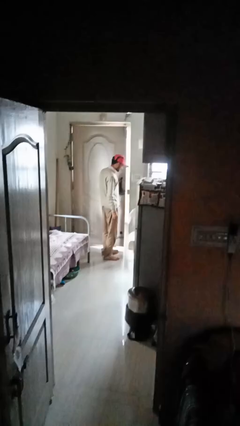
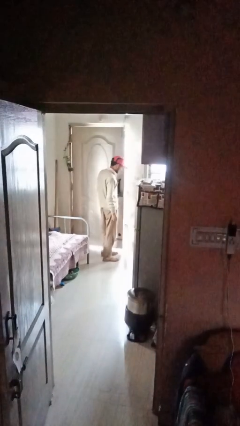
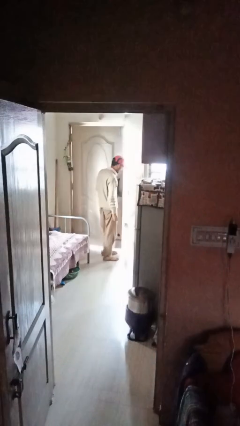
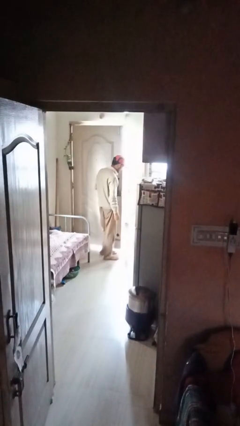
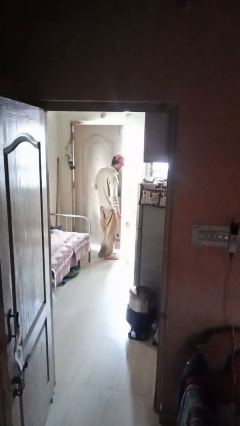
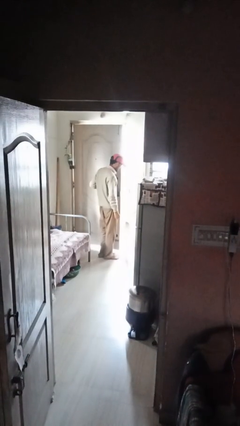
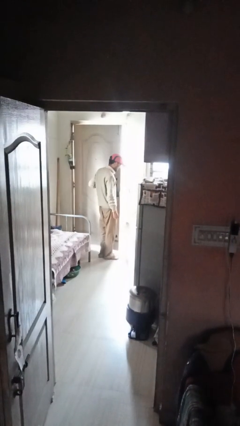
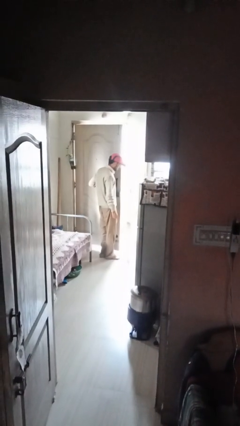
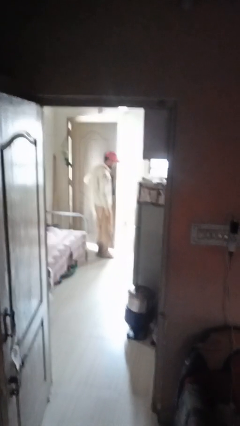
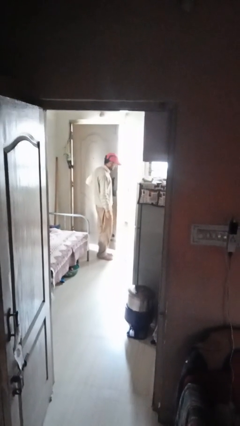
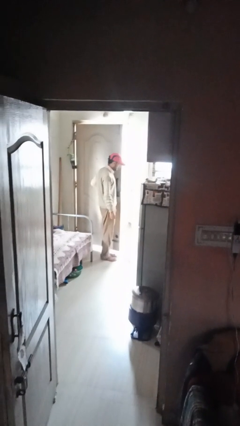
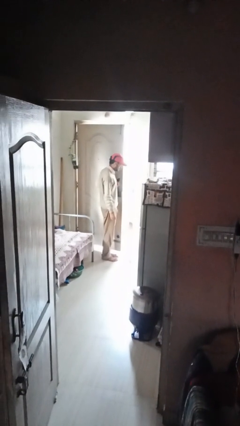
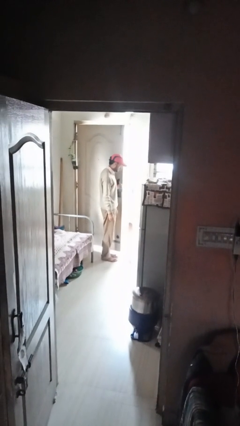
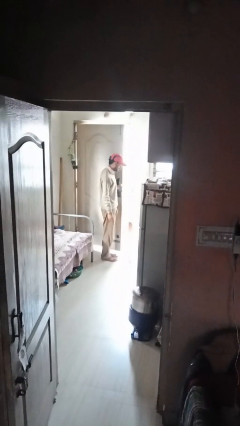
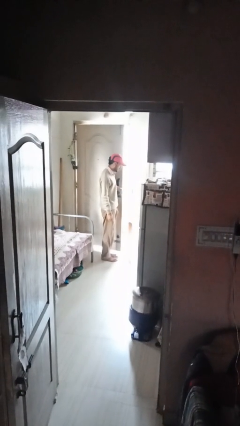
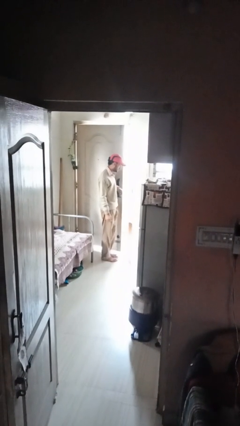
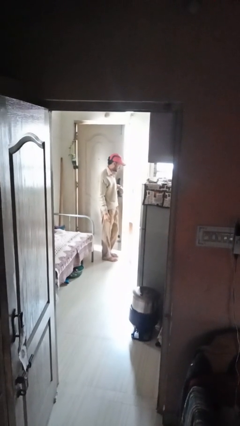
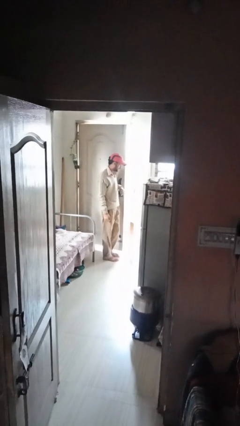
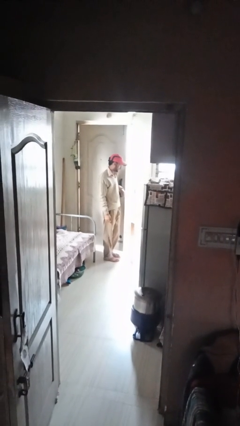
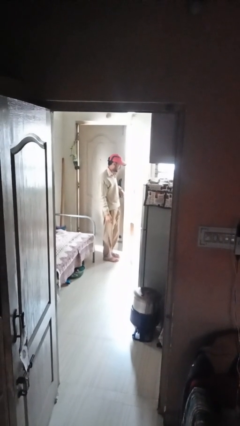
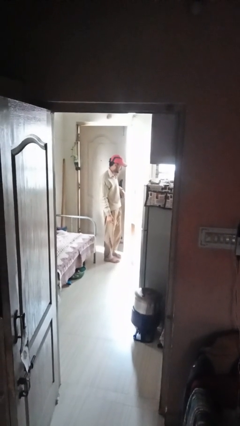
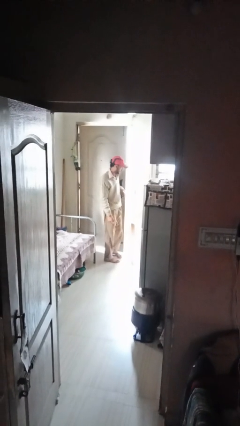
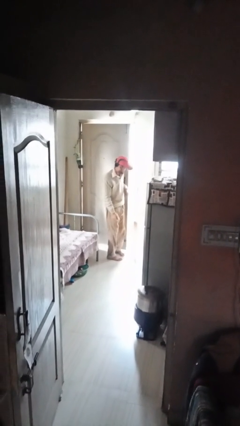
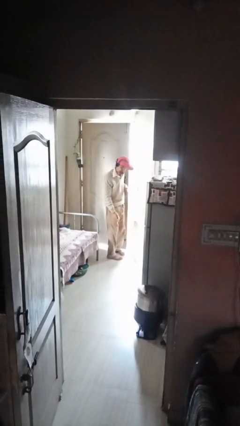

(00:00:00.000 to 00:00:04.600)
person opens facility door

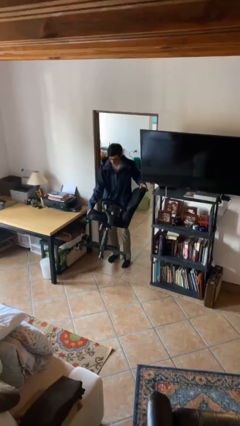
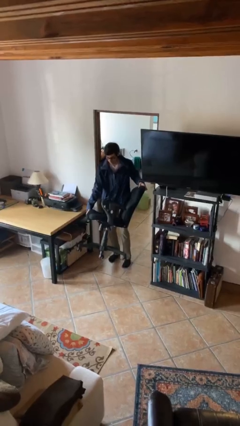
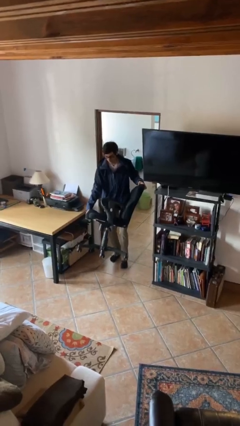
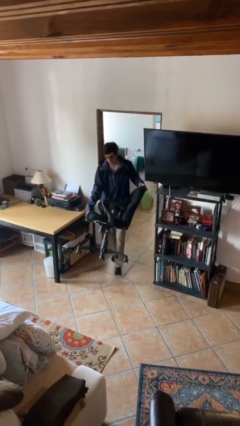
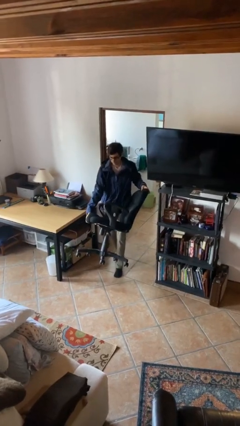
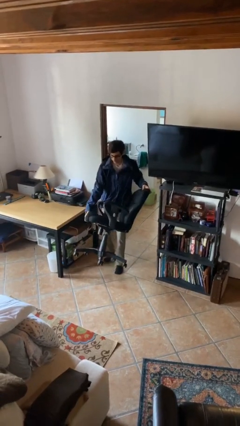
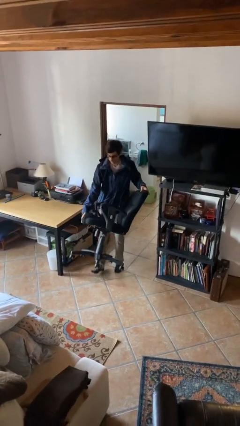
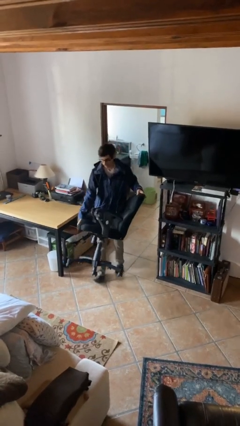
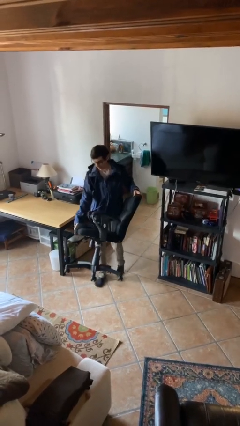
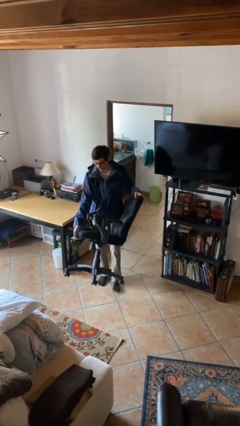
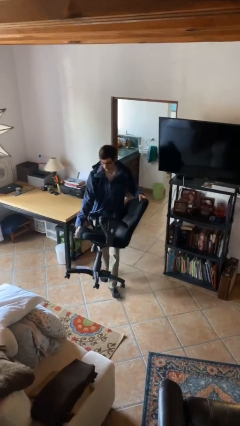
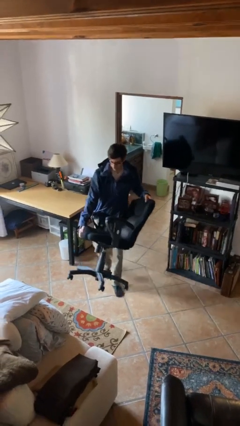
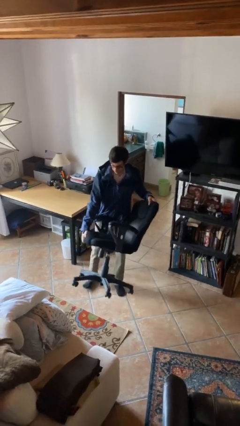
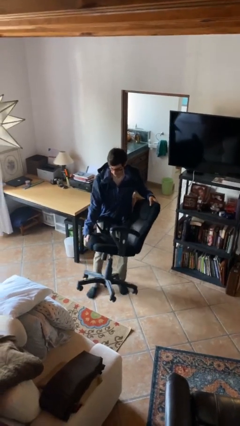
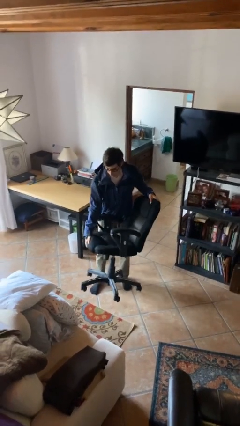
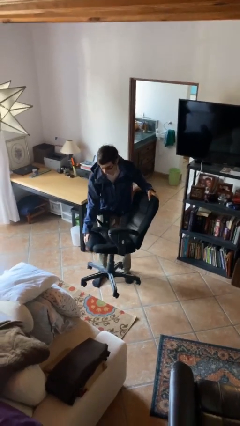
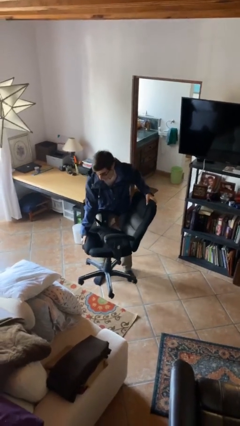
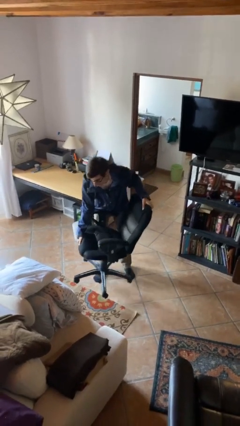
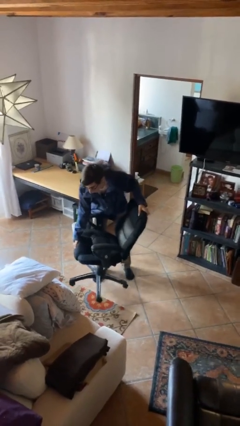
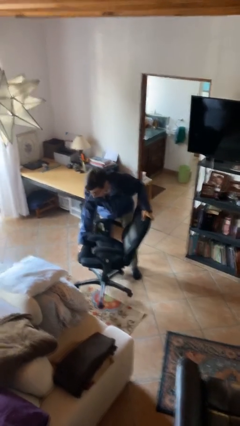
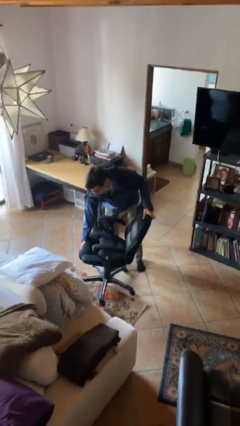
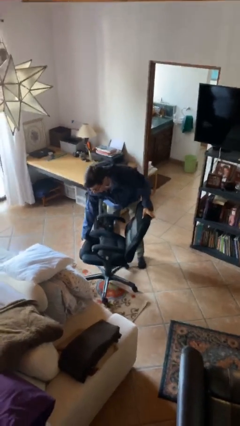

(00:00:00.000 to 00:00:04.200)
person carries heavy object

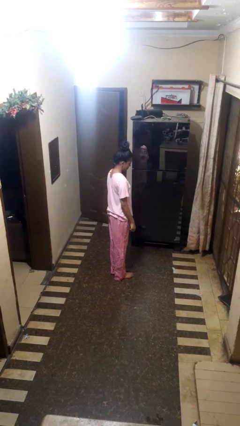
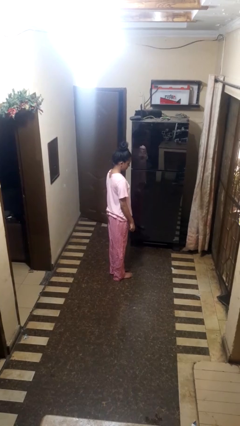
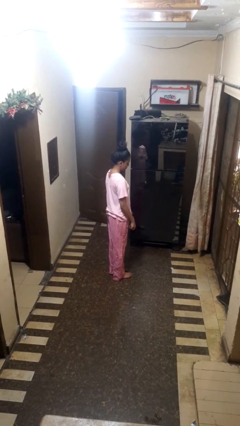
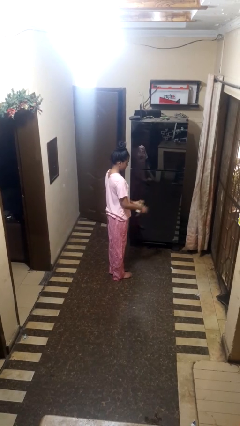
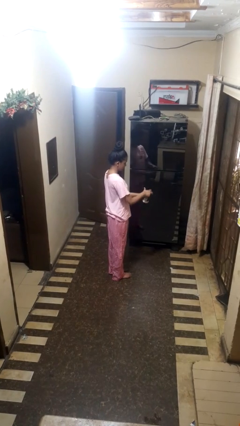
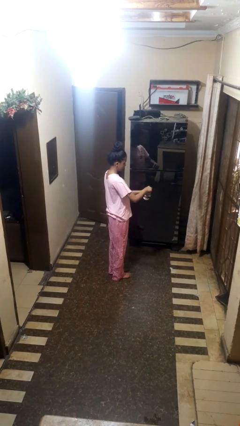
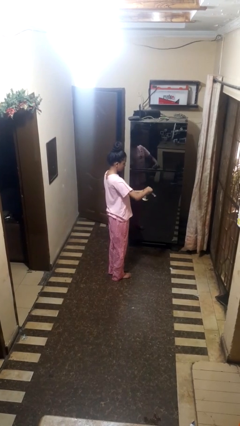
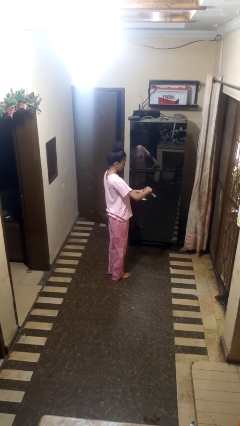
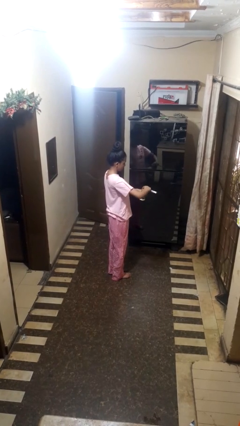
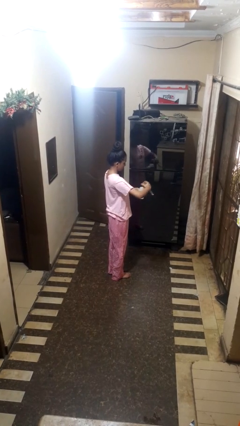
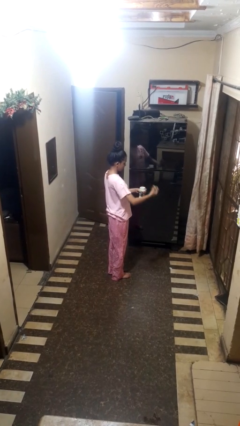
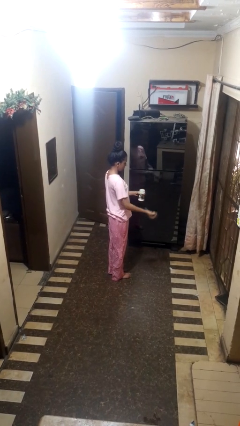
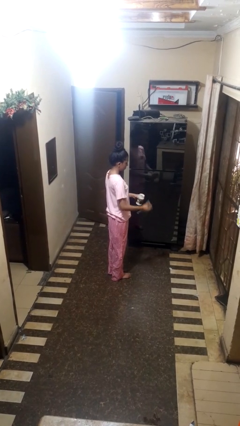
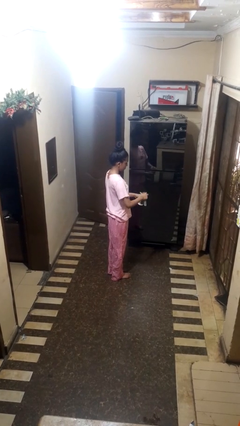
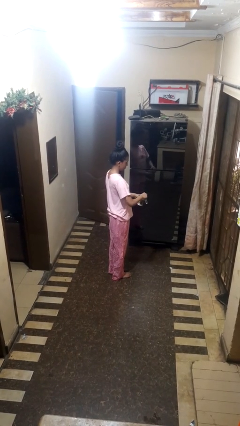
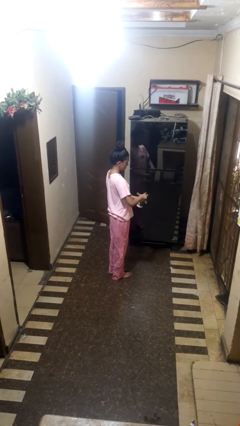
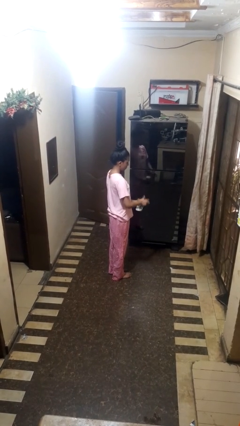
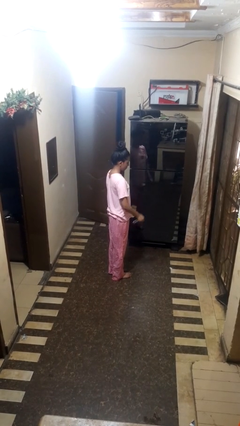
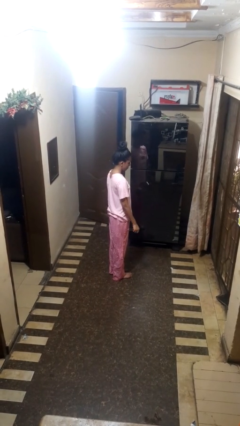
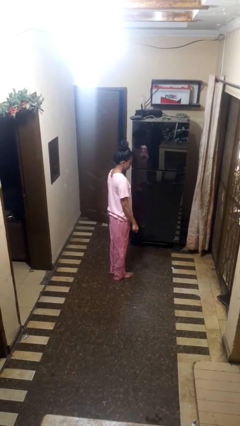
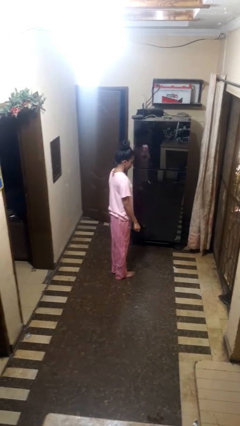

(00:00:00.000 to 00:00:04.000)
person opens can with can opener

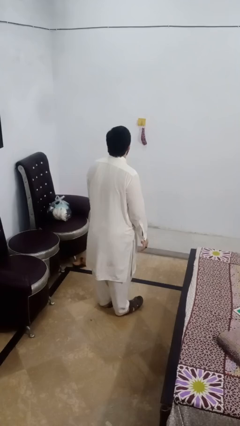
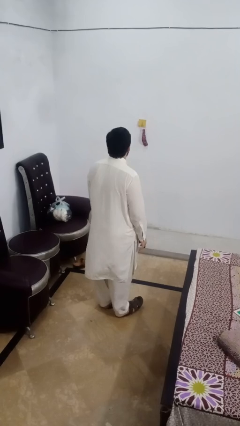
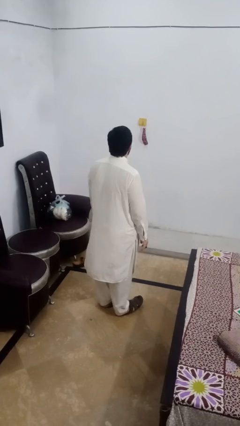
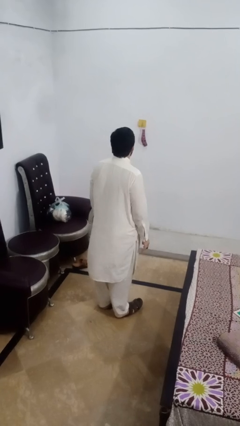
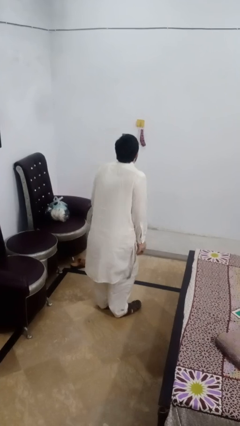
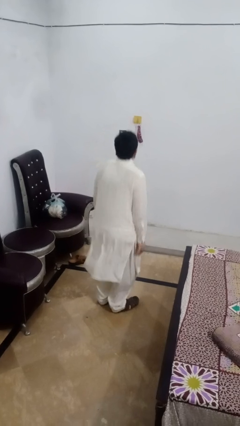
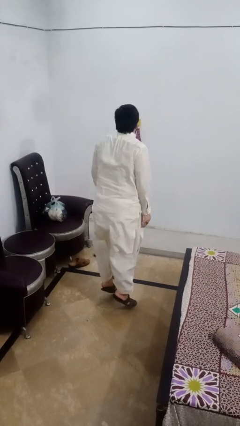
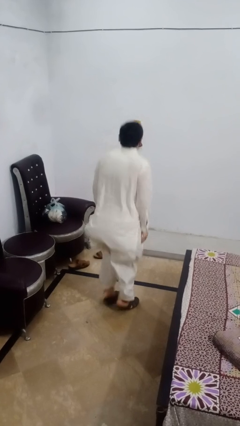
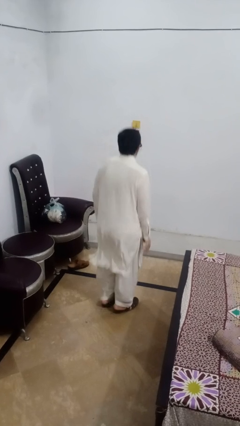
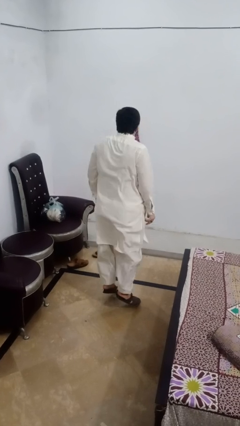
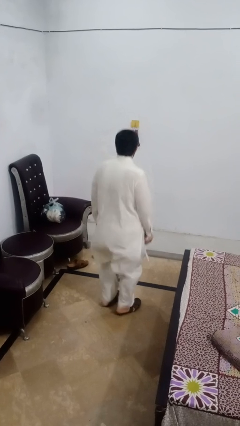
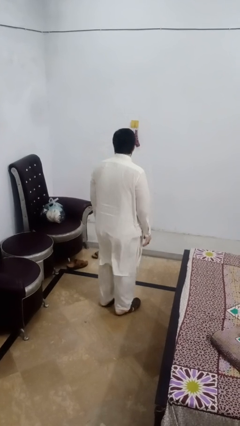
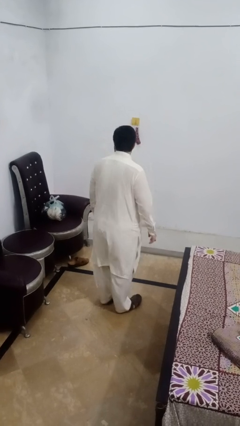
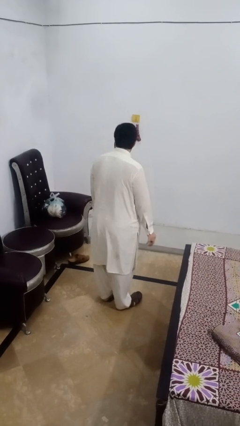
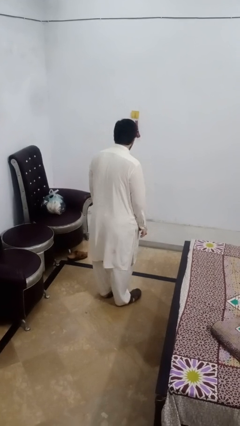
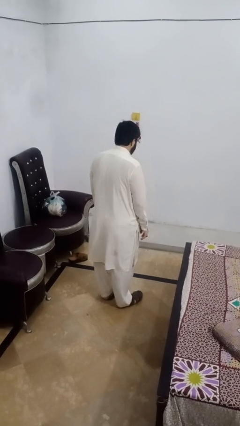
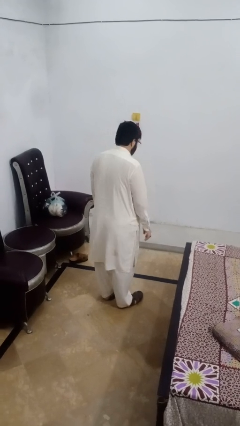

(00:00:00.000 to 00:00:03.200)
person jumps

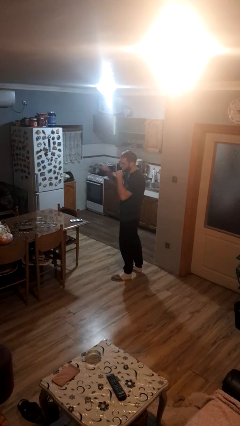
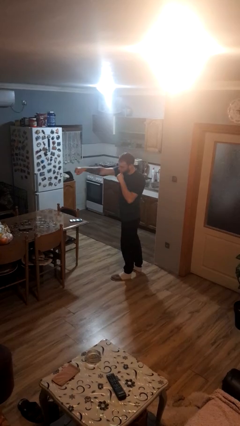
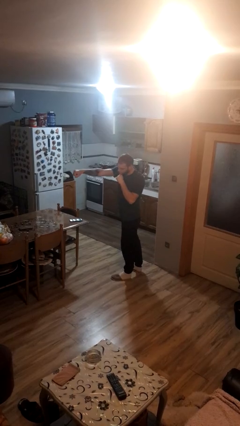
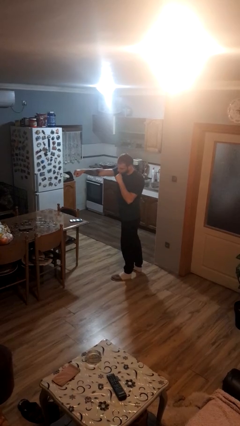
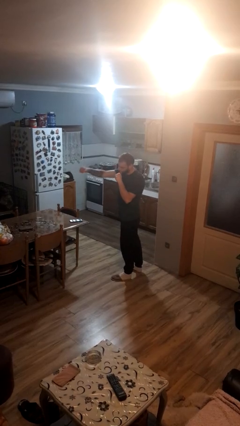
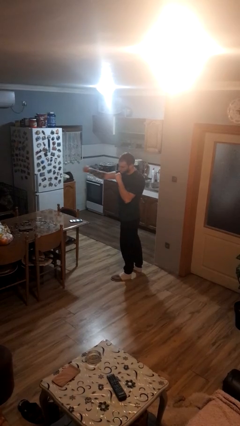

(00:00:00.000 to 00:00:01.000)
person punches

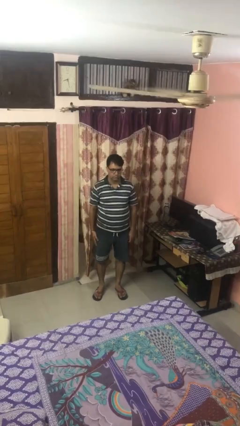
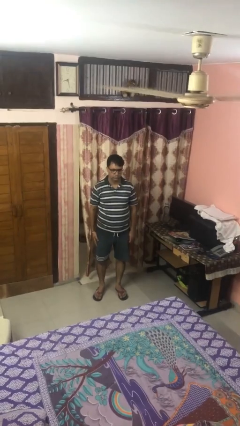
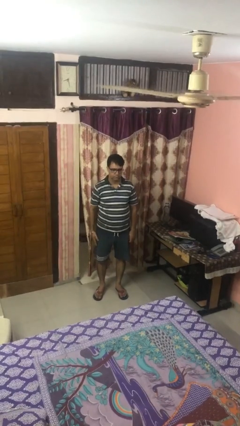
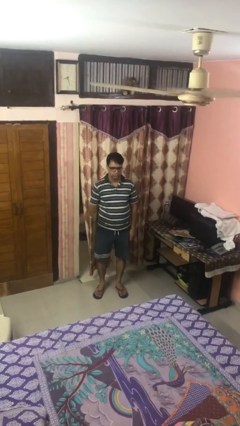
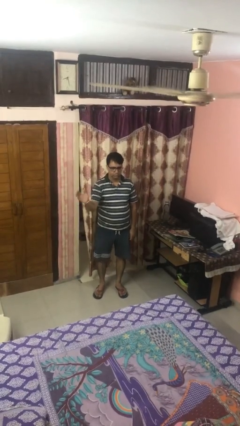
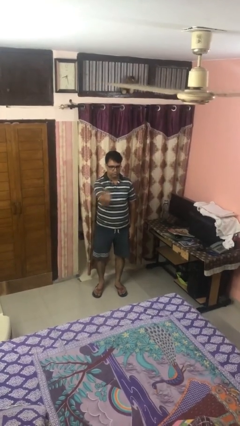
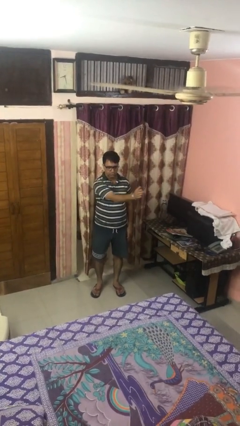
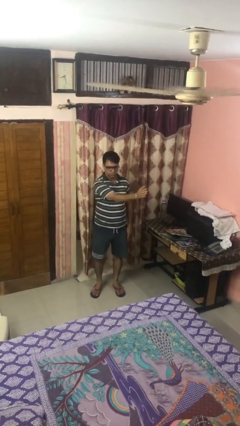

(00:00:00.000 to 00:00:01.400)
person gestures swipe left
